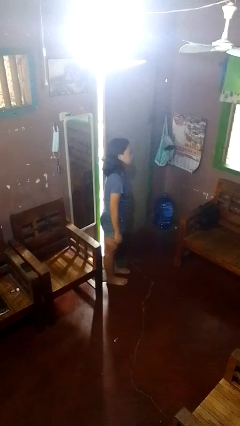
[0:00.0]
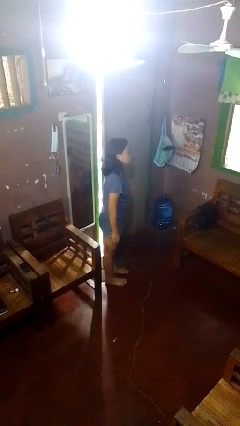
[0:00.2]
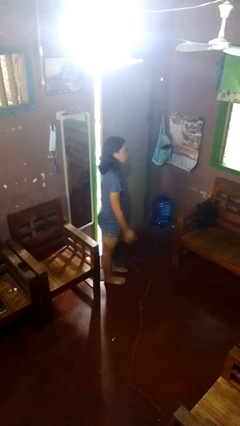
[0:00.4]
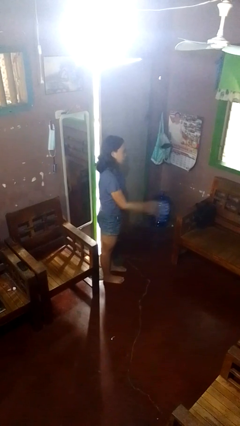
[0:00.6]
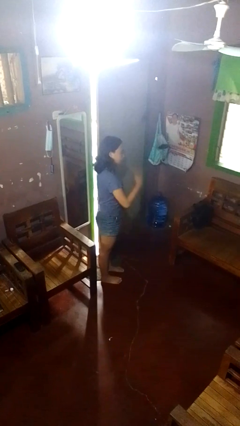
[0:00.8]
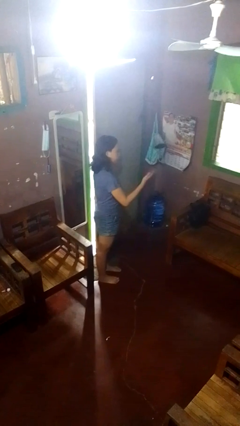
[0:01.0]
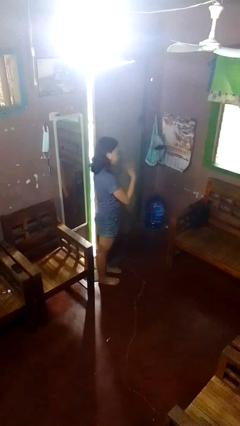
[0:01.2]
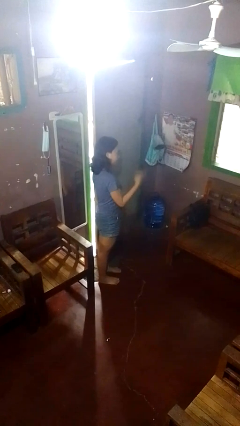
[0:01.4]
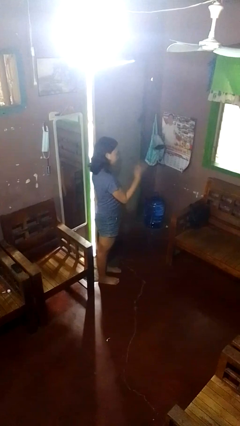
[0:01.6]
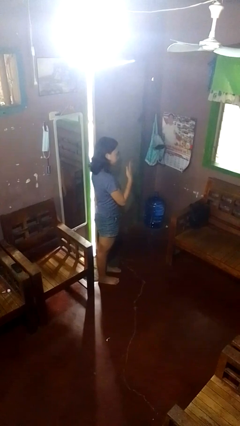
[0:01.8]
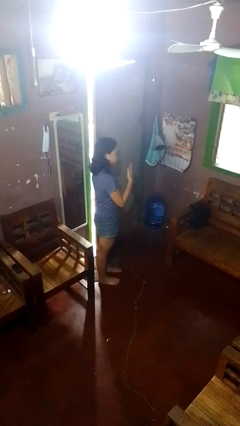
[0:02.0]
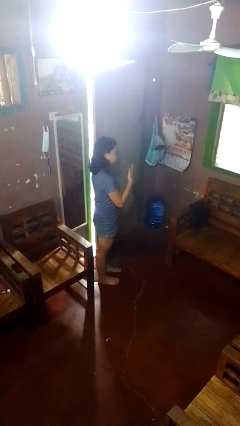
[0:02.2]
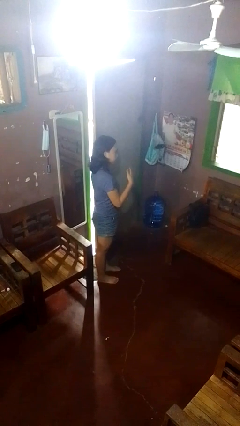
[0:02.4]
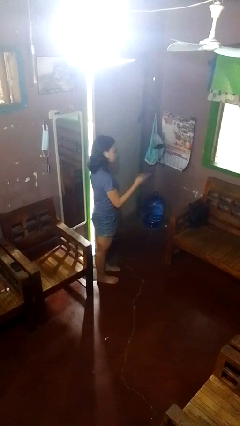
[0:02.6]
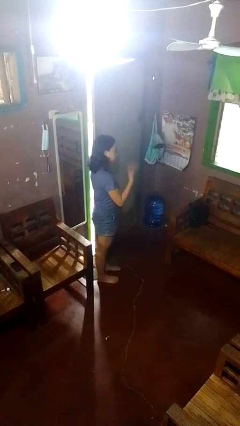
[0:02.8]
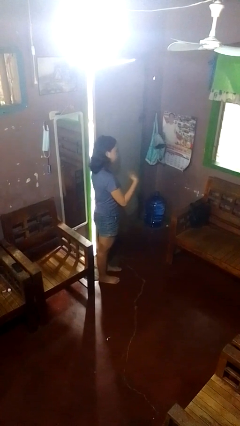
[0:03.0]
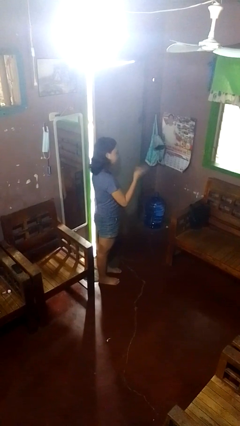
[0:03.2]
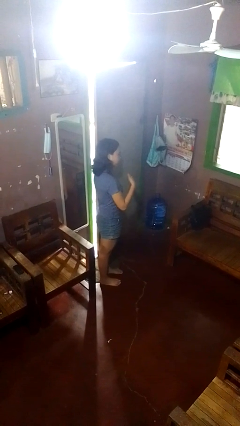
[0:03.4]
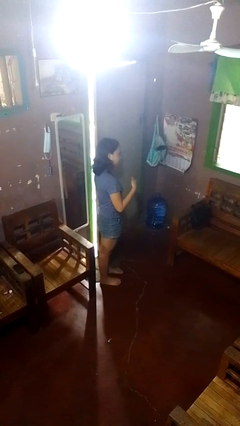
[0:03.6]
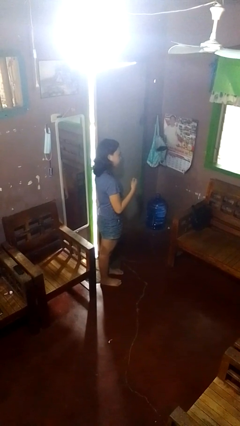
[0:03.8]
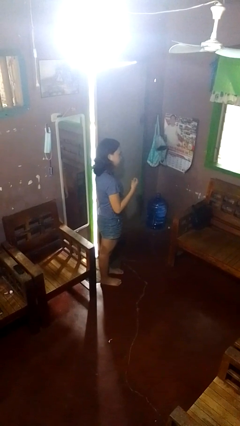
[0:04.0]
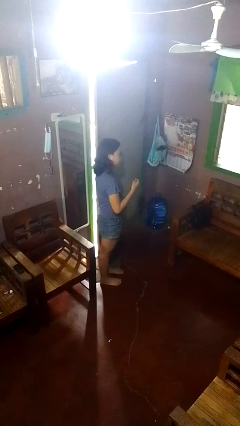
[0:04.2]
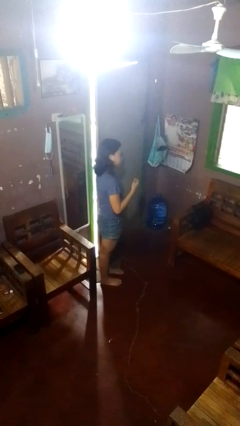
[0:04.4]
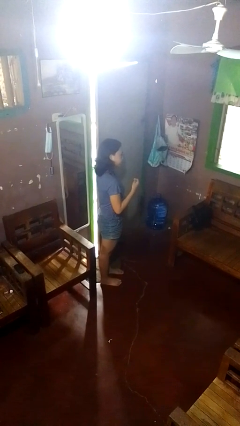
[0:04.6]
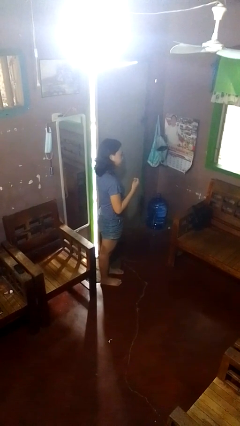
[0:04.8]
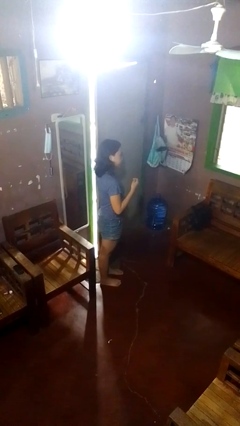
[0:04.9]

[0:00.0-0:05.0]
person gestures come here

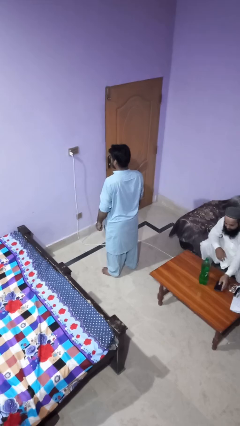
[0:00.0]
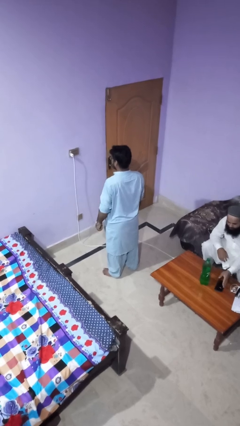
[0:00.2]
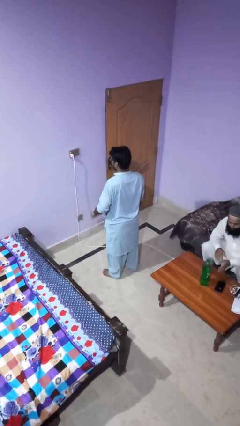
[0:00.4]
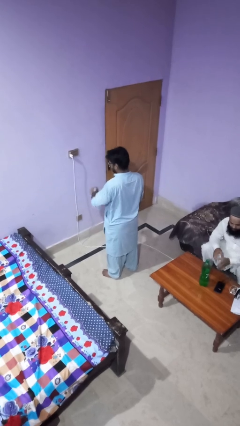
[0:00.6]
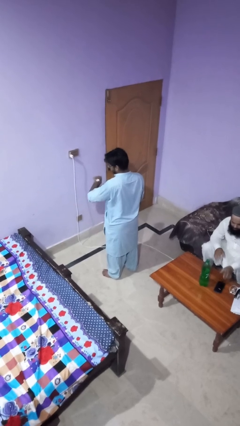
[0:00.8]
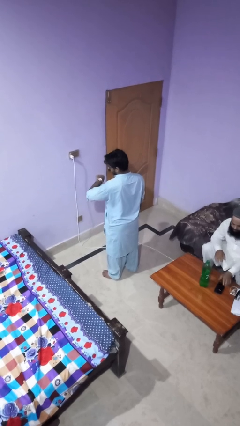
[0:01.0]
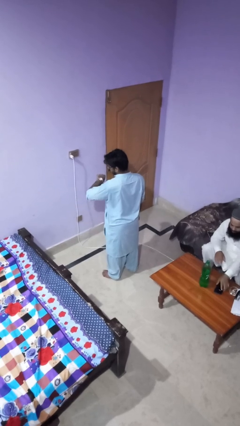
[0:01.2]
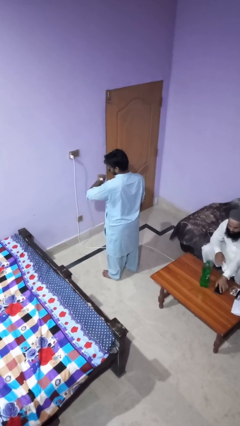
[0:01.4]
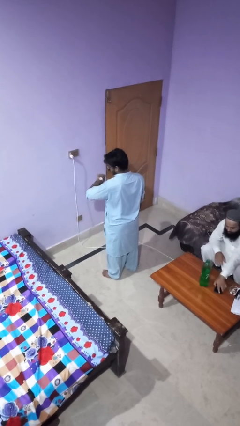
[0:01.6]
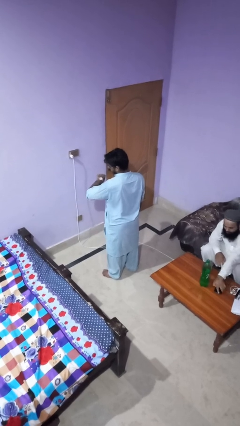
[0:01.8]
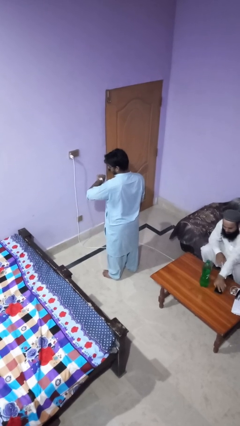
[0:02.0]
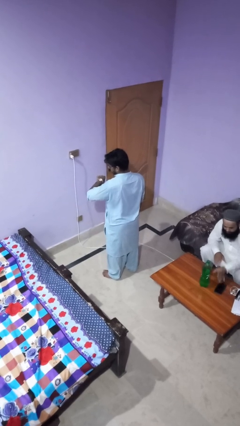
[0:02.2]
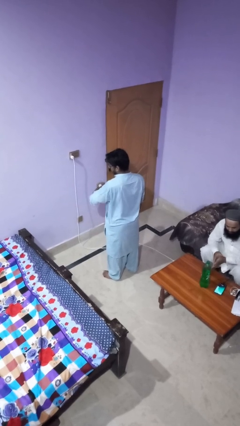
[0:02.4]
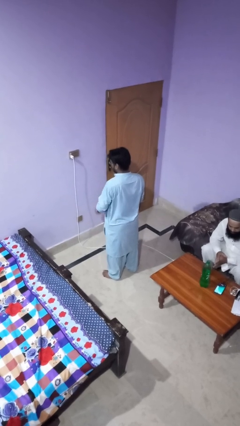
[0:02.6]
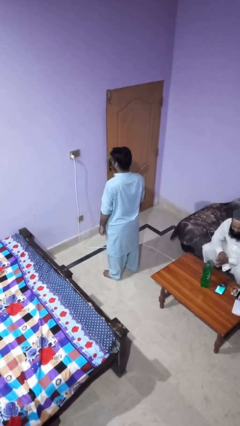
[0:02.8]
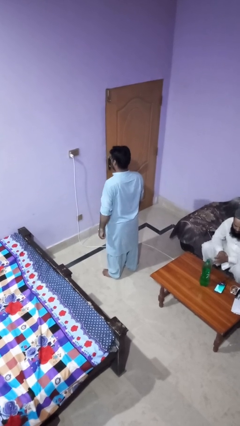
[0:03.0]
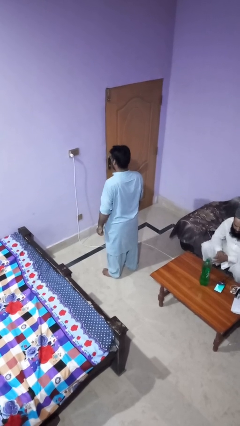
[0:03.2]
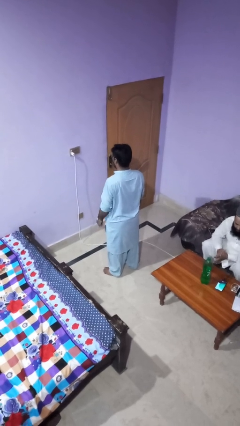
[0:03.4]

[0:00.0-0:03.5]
person looks at wristwatch

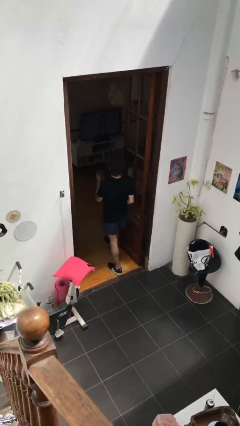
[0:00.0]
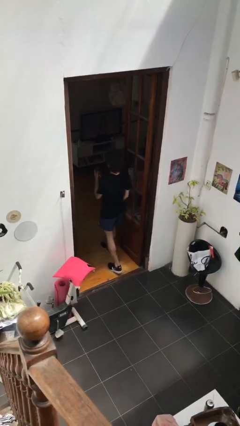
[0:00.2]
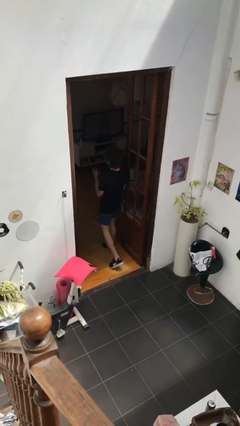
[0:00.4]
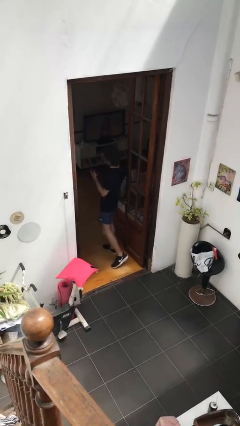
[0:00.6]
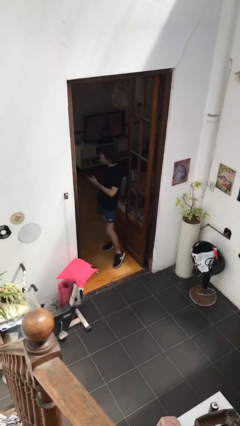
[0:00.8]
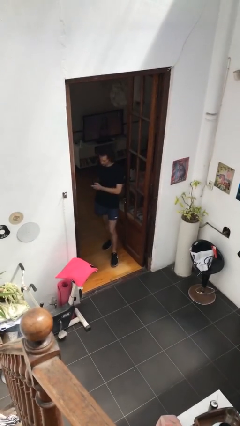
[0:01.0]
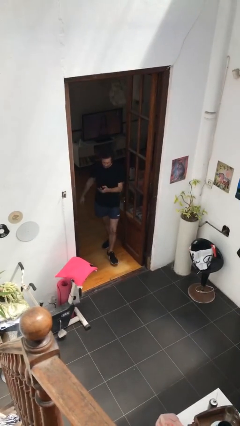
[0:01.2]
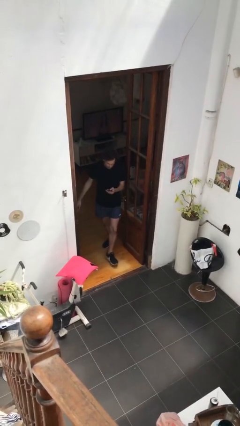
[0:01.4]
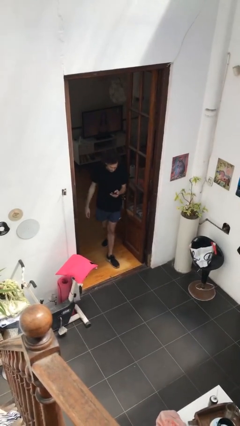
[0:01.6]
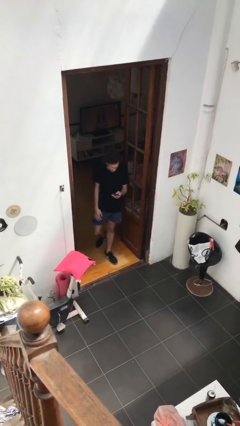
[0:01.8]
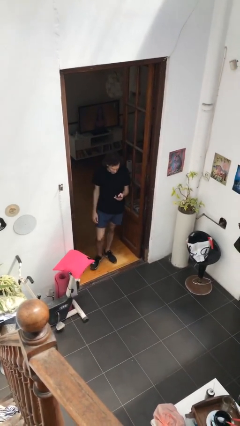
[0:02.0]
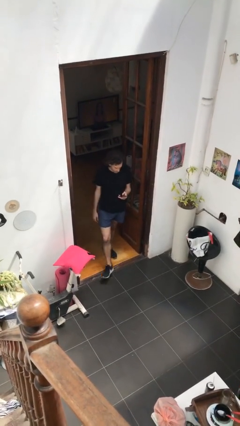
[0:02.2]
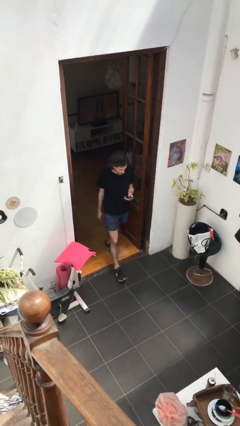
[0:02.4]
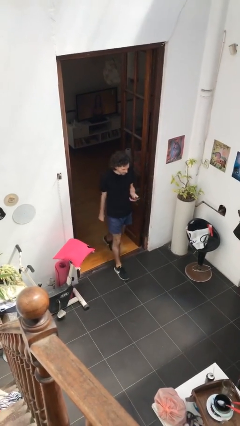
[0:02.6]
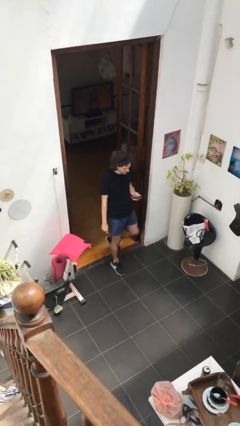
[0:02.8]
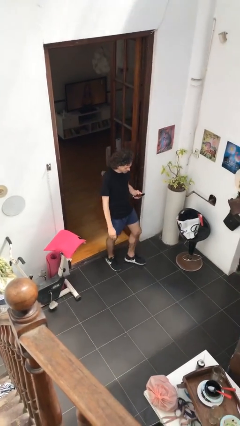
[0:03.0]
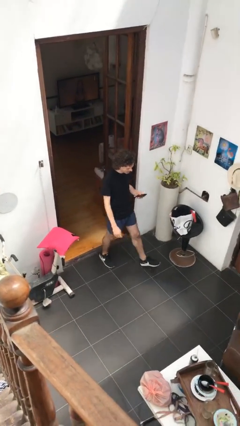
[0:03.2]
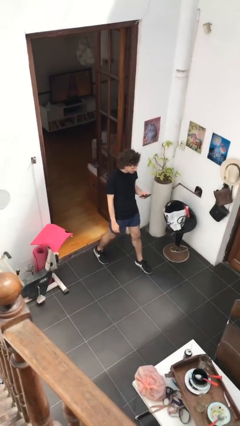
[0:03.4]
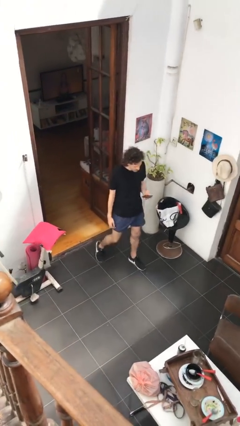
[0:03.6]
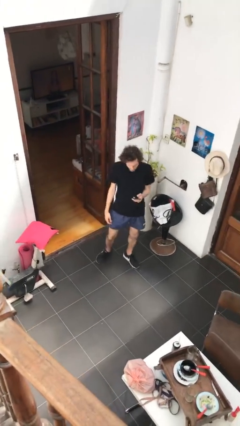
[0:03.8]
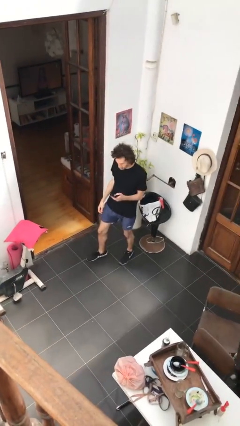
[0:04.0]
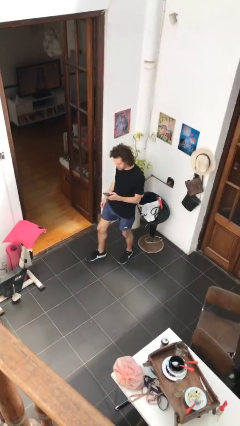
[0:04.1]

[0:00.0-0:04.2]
person enters scene through structure

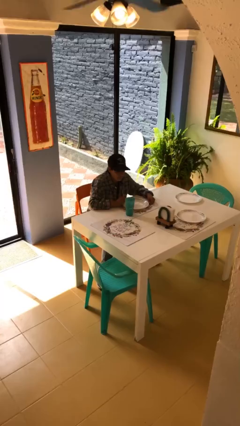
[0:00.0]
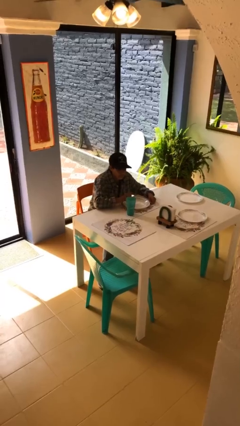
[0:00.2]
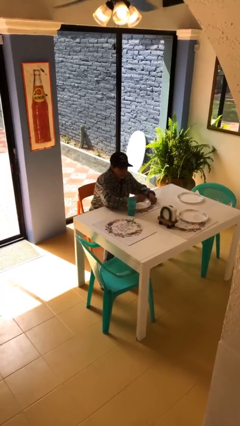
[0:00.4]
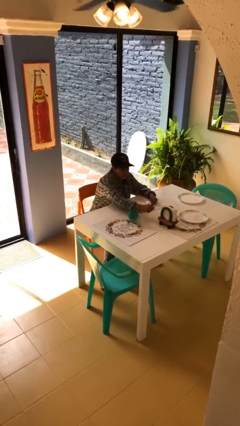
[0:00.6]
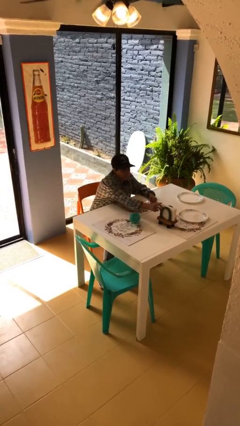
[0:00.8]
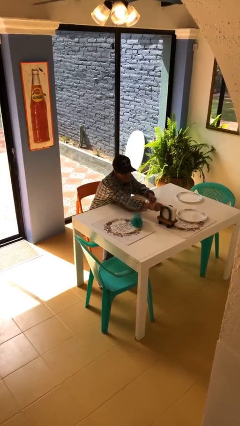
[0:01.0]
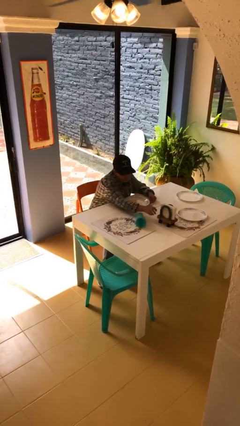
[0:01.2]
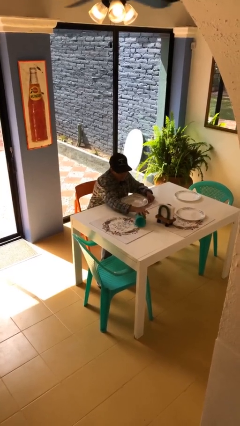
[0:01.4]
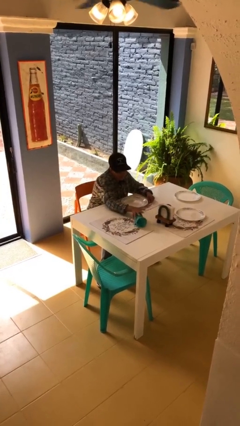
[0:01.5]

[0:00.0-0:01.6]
person knocks over glass

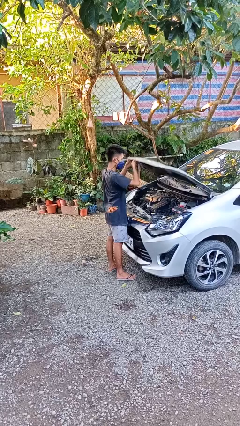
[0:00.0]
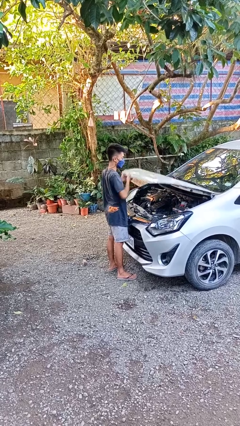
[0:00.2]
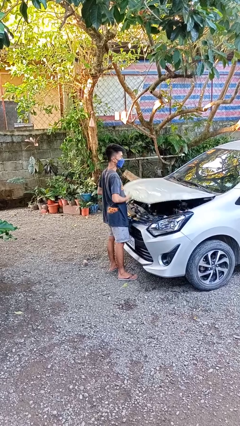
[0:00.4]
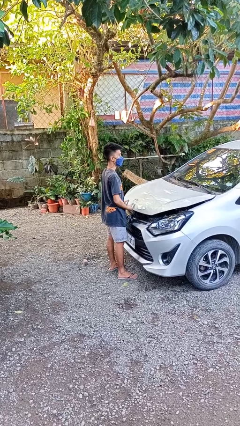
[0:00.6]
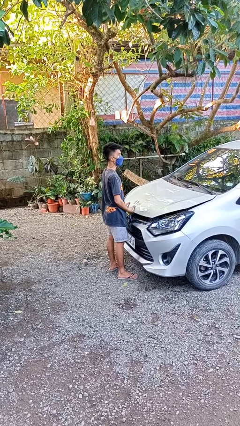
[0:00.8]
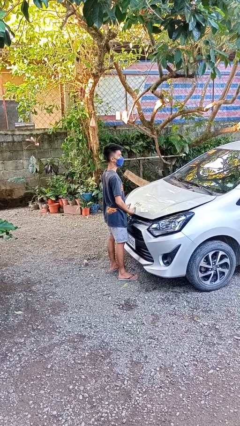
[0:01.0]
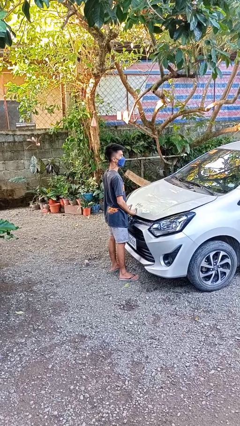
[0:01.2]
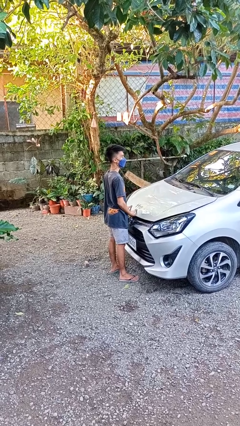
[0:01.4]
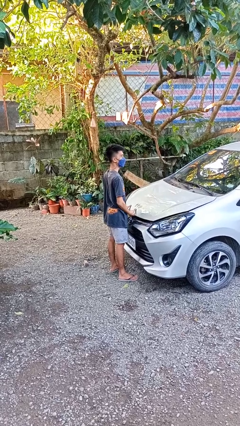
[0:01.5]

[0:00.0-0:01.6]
person closes car hood

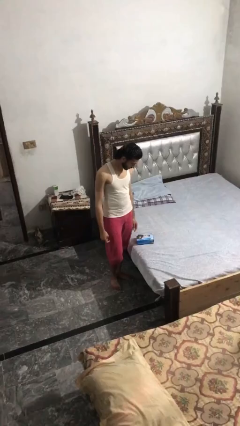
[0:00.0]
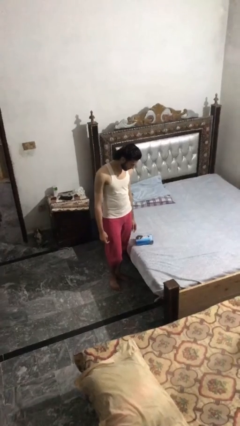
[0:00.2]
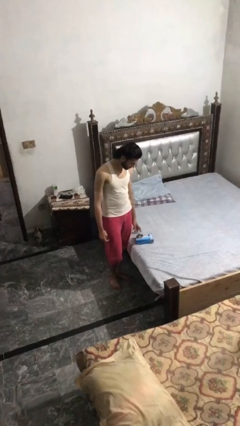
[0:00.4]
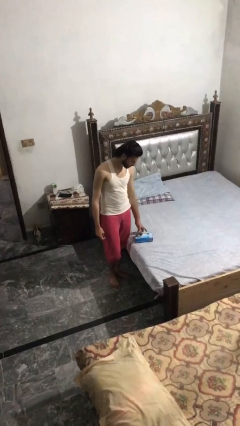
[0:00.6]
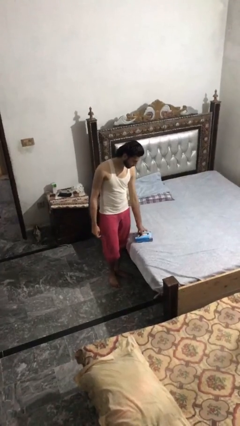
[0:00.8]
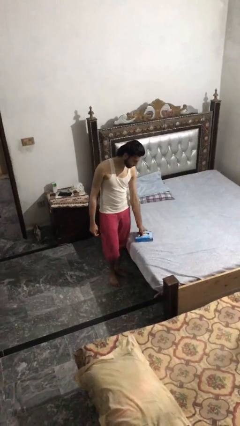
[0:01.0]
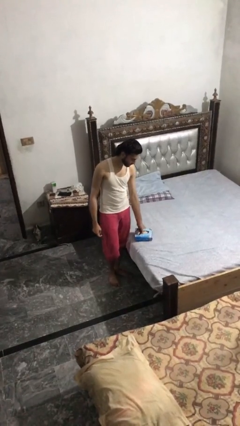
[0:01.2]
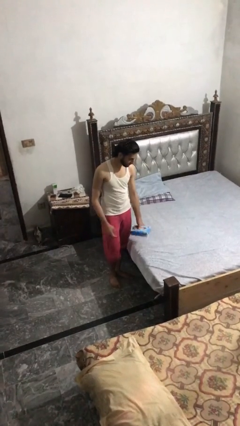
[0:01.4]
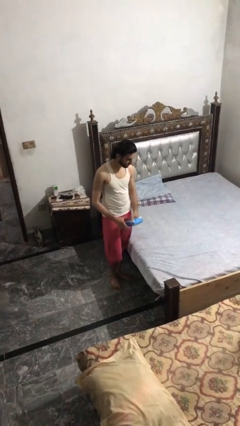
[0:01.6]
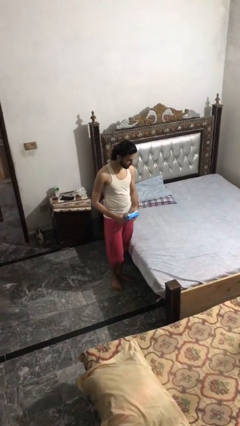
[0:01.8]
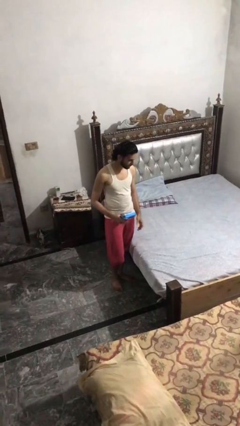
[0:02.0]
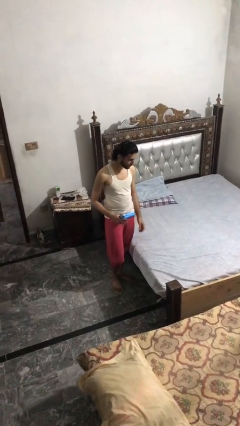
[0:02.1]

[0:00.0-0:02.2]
person picks up object from bed
